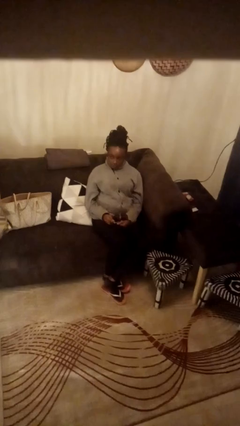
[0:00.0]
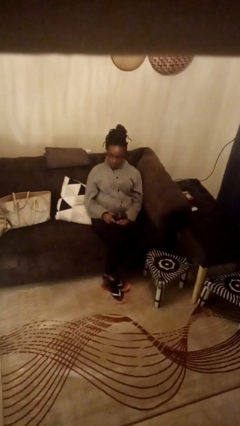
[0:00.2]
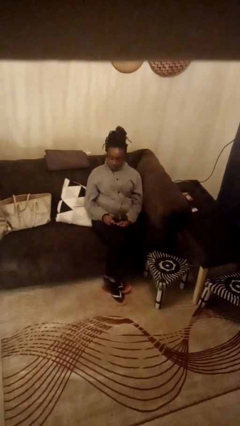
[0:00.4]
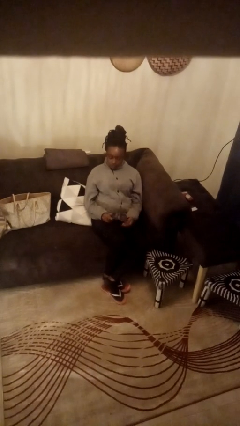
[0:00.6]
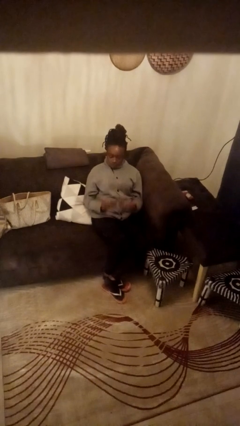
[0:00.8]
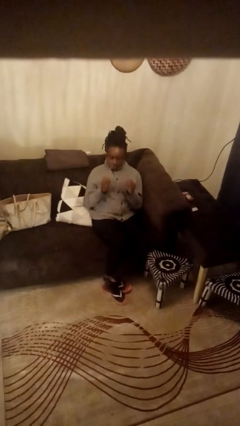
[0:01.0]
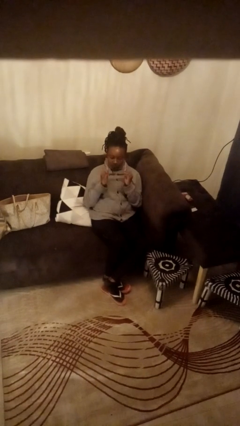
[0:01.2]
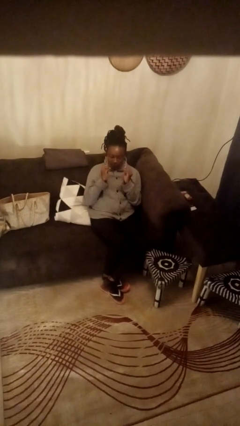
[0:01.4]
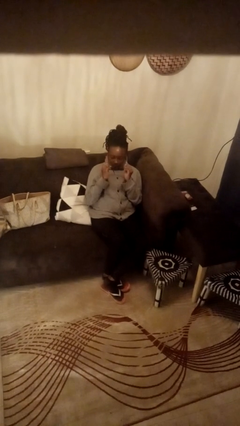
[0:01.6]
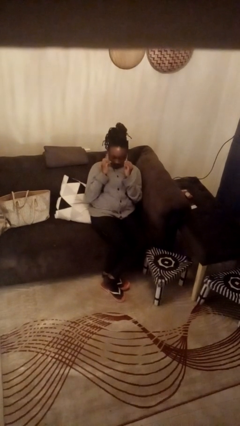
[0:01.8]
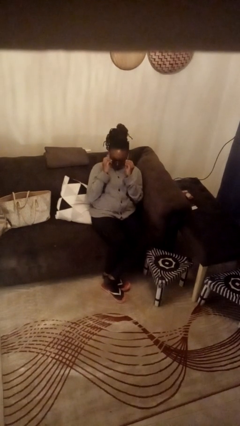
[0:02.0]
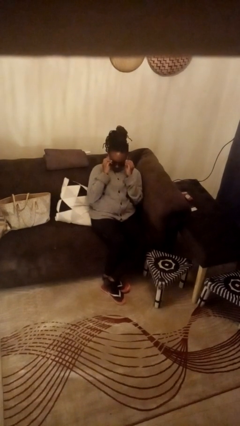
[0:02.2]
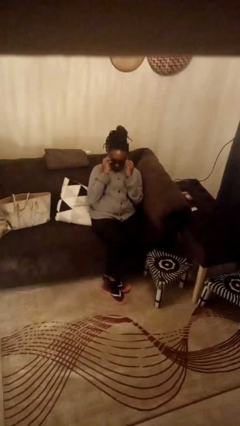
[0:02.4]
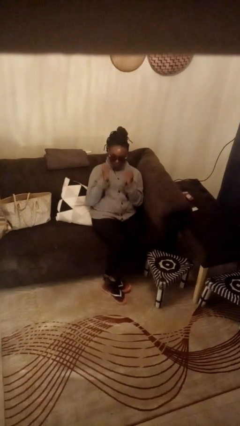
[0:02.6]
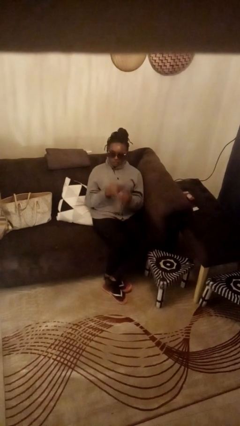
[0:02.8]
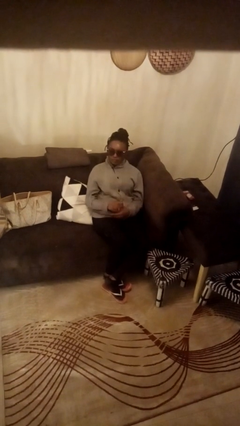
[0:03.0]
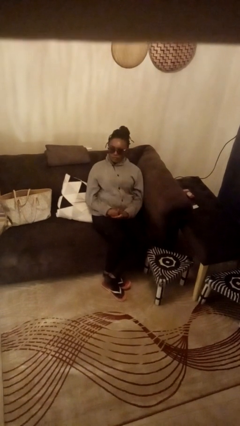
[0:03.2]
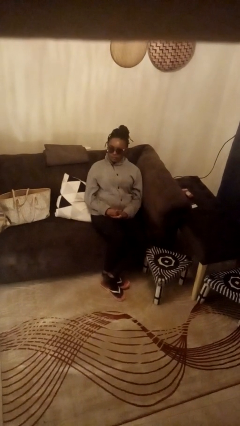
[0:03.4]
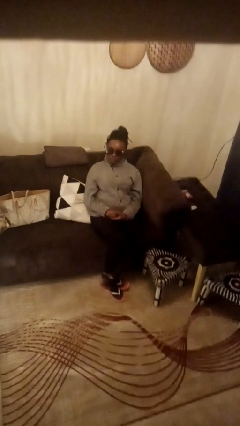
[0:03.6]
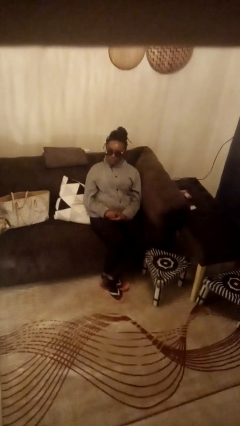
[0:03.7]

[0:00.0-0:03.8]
person puts on sunglasses

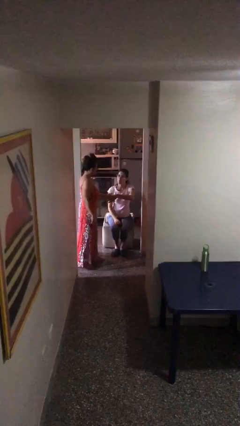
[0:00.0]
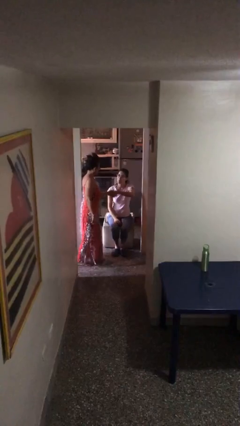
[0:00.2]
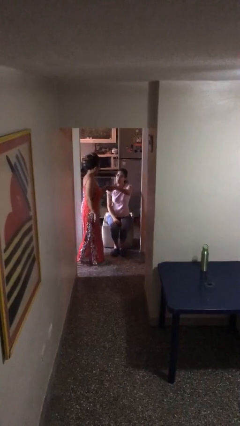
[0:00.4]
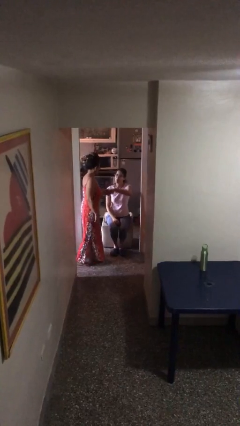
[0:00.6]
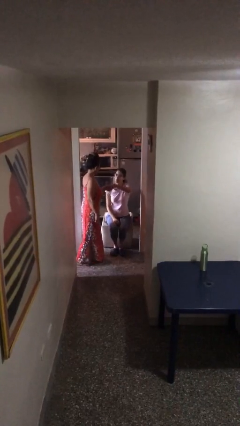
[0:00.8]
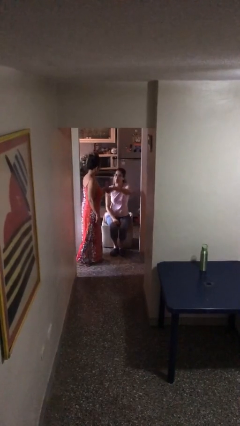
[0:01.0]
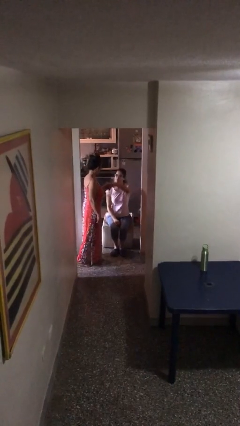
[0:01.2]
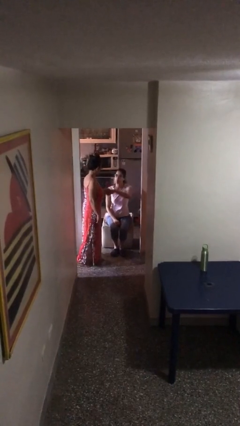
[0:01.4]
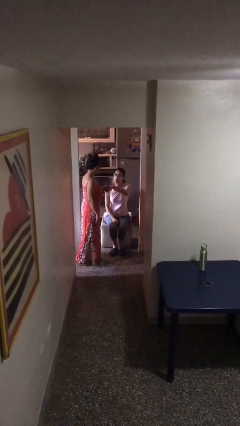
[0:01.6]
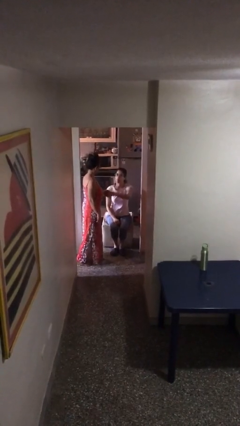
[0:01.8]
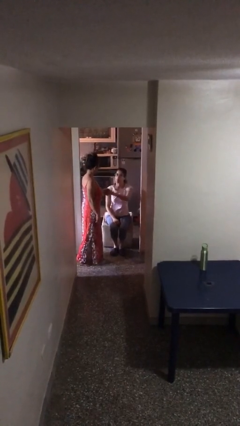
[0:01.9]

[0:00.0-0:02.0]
person shakes hand

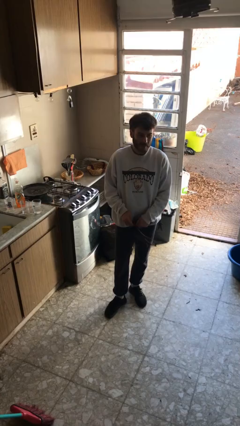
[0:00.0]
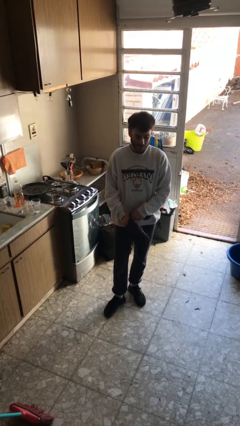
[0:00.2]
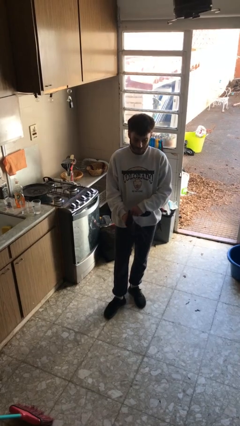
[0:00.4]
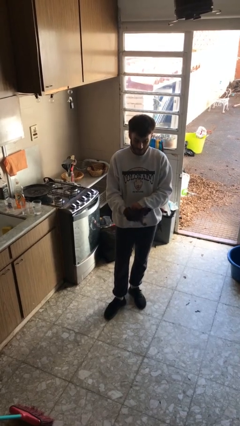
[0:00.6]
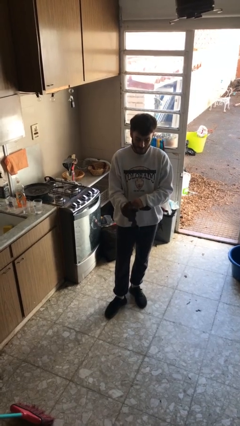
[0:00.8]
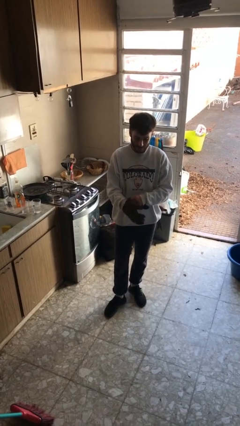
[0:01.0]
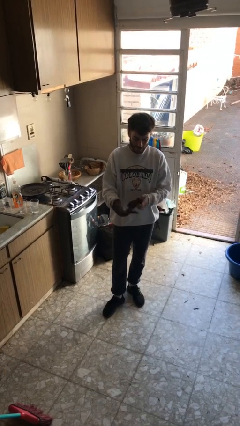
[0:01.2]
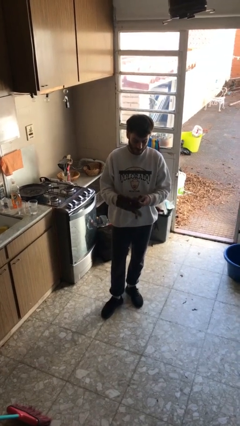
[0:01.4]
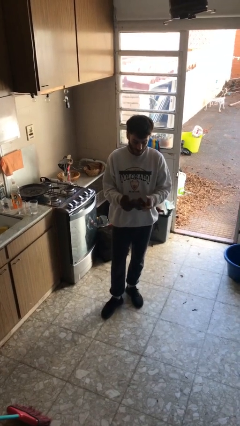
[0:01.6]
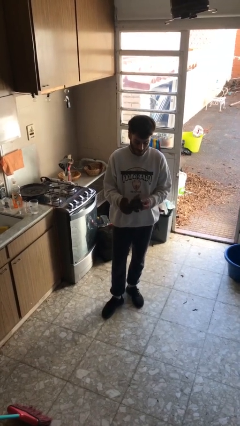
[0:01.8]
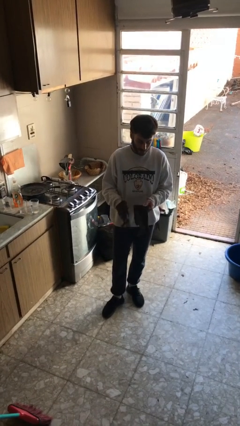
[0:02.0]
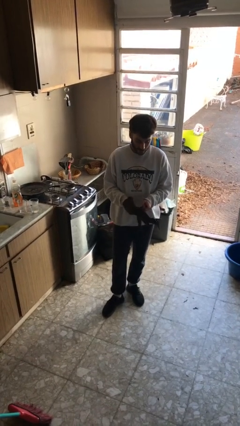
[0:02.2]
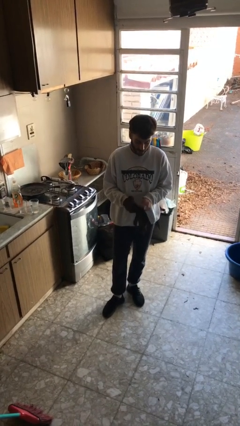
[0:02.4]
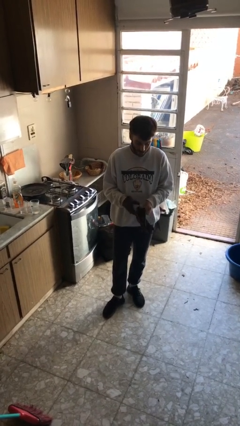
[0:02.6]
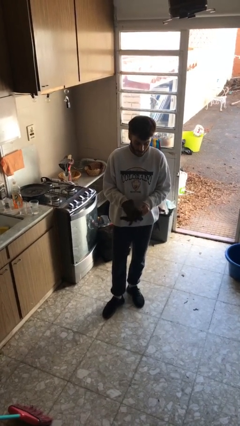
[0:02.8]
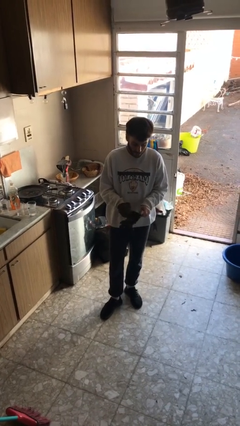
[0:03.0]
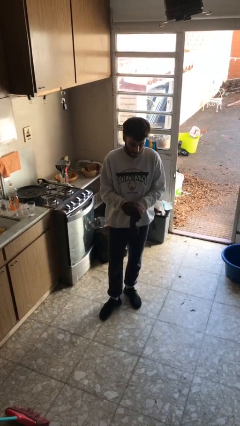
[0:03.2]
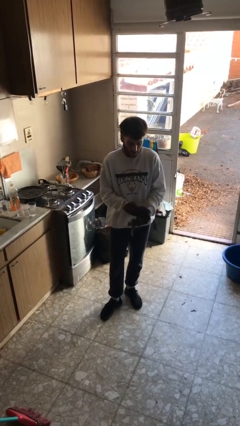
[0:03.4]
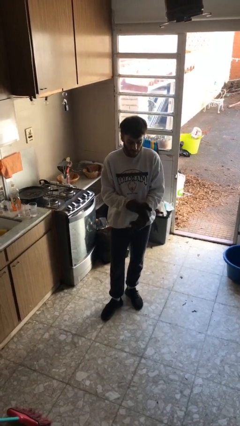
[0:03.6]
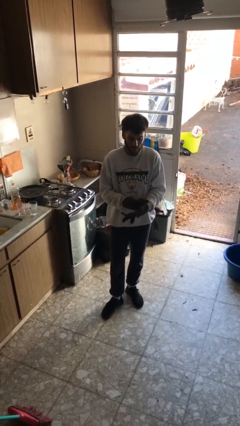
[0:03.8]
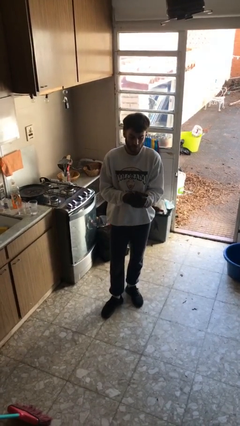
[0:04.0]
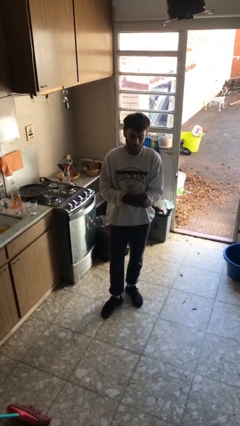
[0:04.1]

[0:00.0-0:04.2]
person puts on gloves

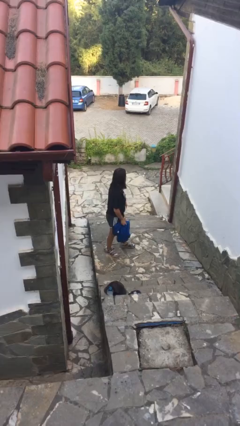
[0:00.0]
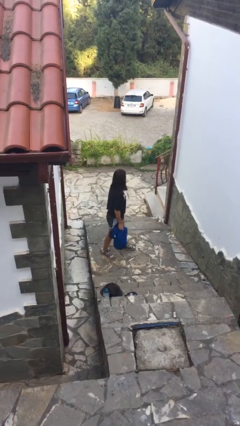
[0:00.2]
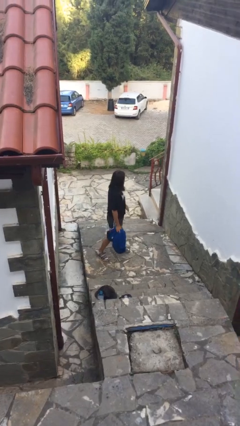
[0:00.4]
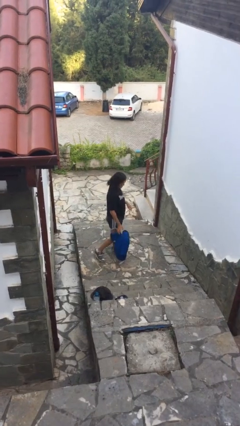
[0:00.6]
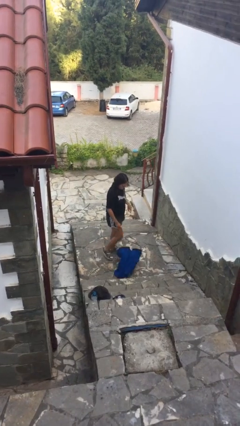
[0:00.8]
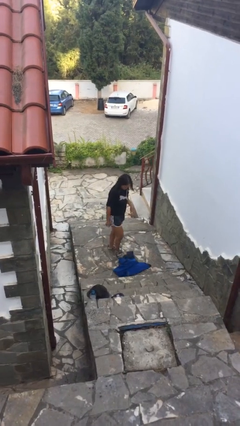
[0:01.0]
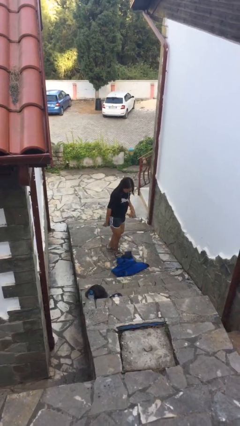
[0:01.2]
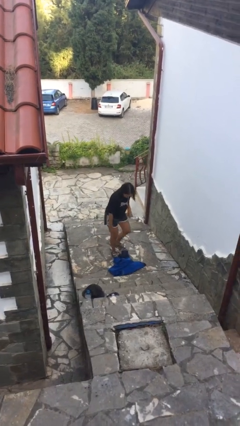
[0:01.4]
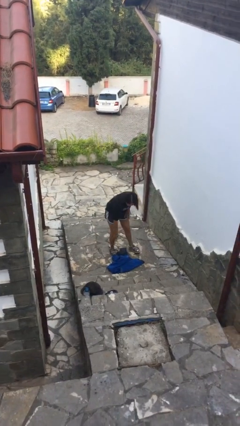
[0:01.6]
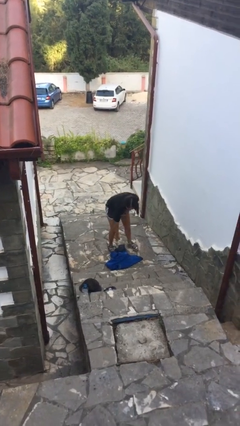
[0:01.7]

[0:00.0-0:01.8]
person drops object

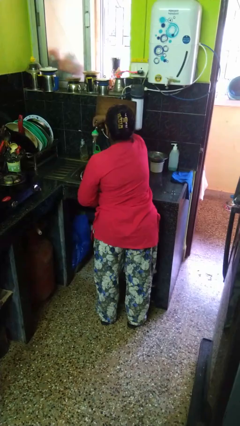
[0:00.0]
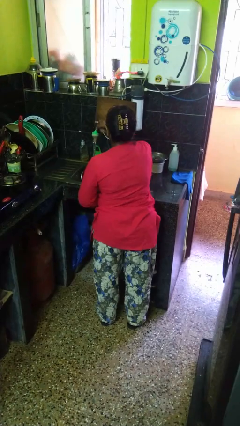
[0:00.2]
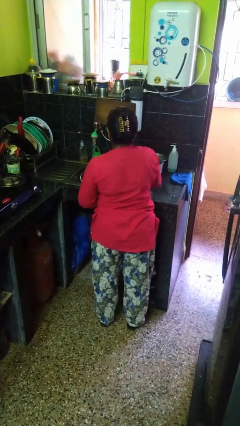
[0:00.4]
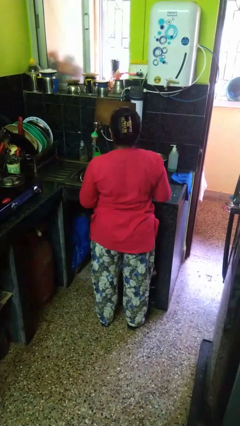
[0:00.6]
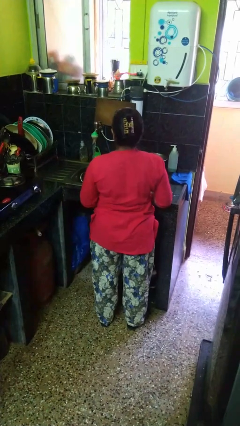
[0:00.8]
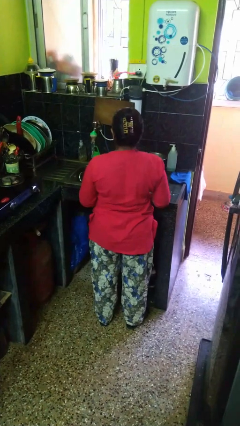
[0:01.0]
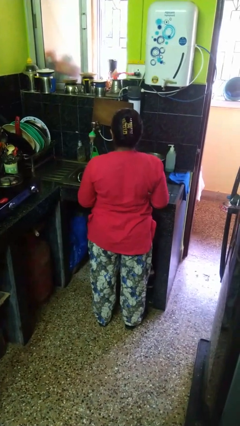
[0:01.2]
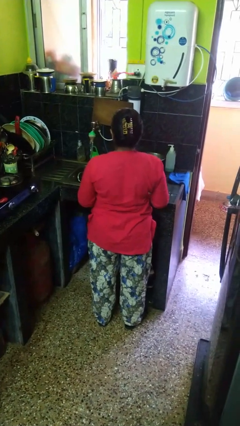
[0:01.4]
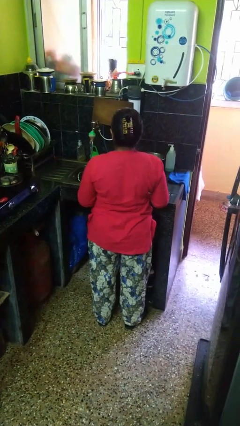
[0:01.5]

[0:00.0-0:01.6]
person turns on faucet

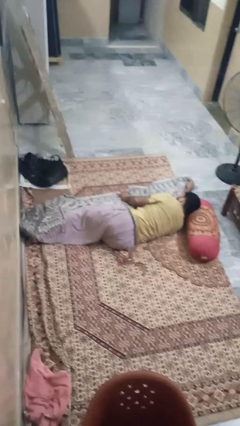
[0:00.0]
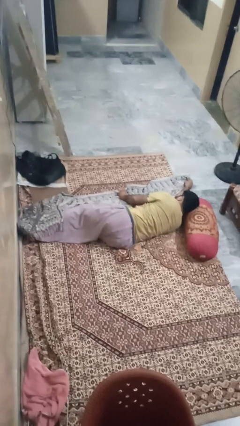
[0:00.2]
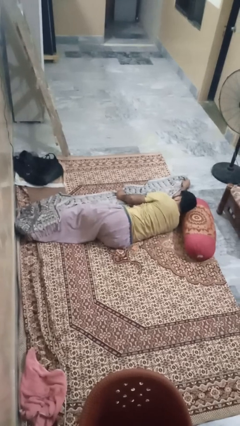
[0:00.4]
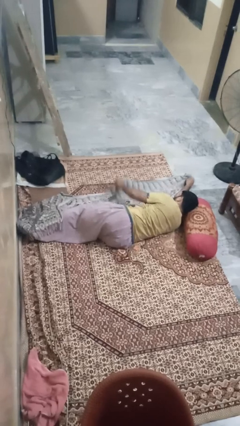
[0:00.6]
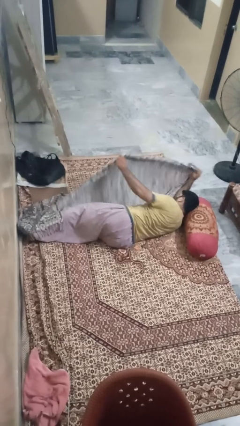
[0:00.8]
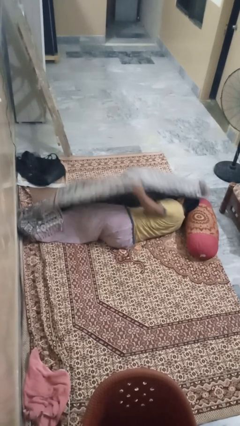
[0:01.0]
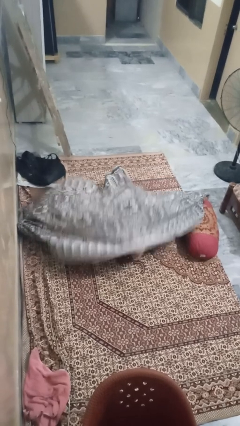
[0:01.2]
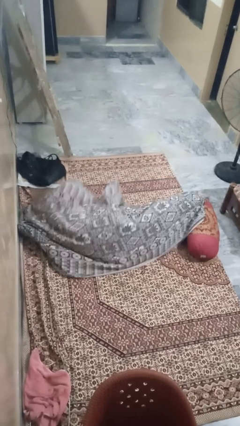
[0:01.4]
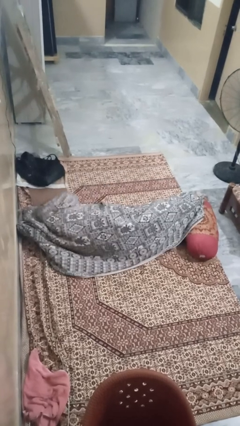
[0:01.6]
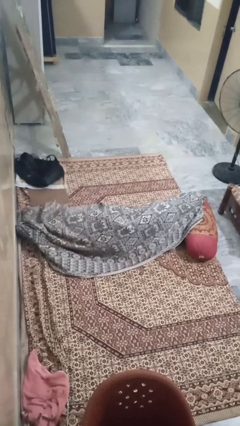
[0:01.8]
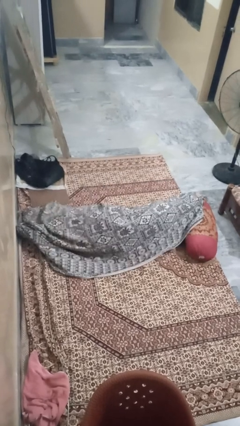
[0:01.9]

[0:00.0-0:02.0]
person covers with blanket

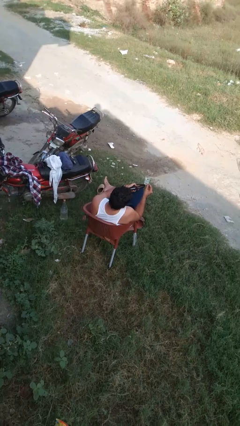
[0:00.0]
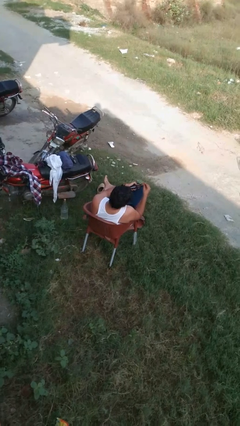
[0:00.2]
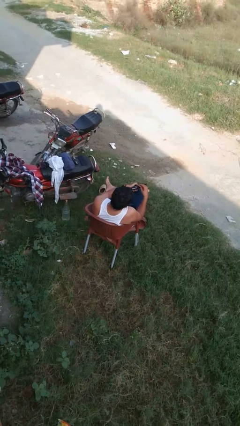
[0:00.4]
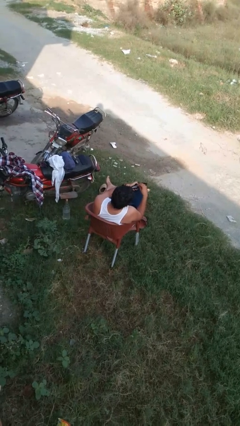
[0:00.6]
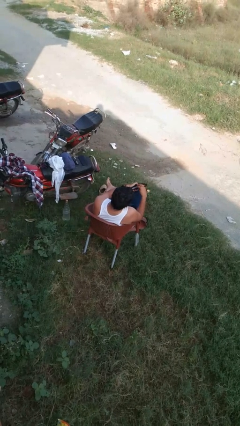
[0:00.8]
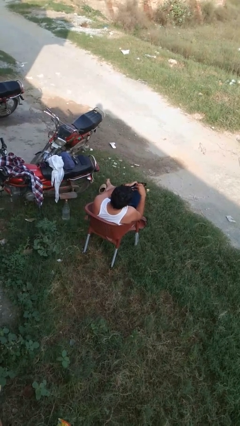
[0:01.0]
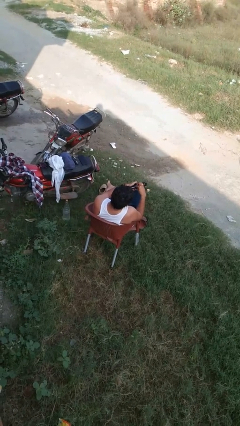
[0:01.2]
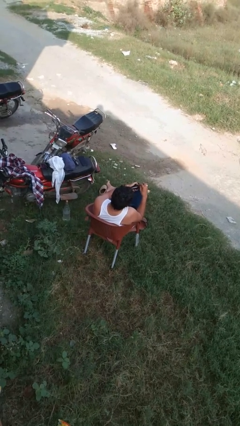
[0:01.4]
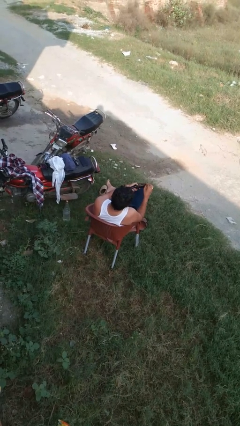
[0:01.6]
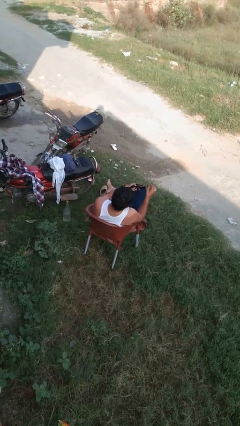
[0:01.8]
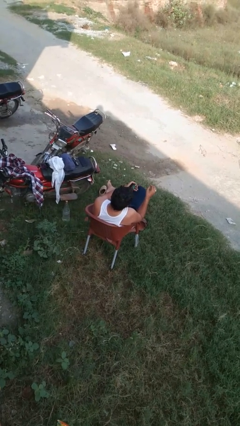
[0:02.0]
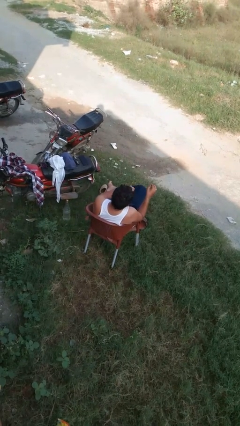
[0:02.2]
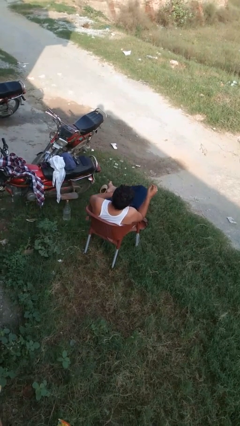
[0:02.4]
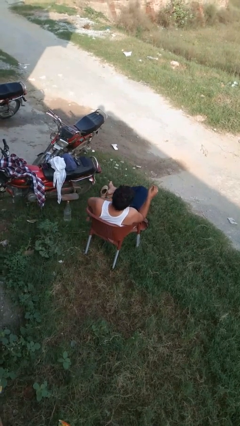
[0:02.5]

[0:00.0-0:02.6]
person puts object into purse
